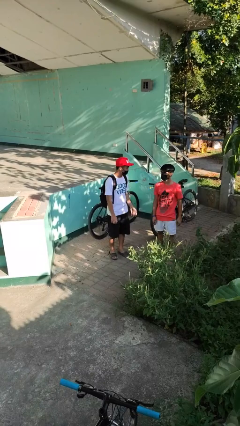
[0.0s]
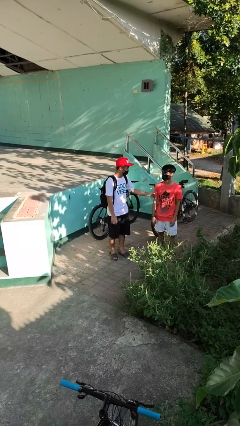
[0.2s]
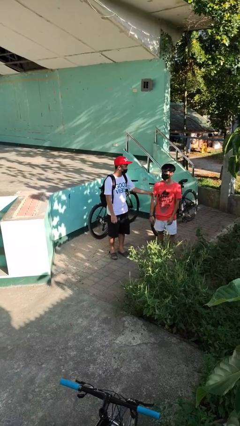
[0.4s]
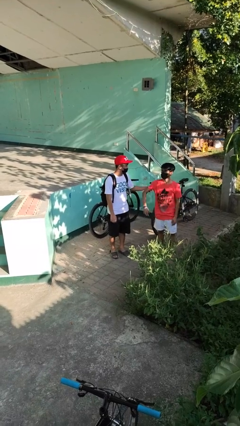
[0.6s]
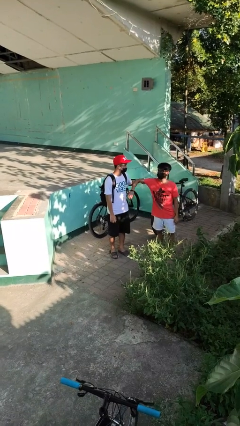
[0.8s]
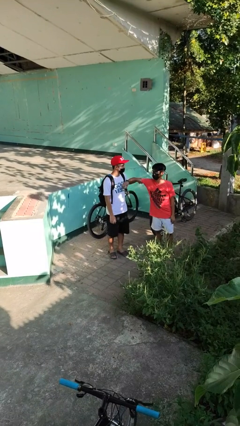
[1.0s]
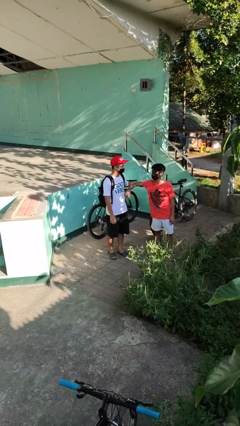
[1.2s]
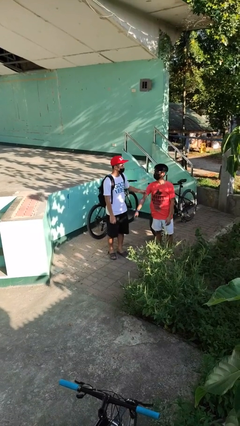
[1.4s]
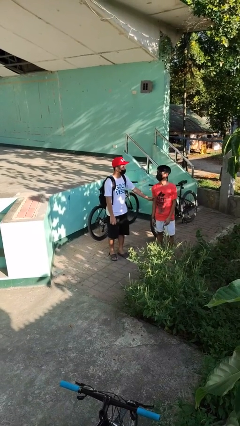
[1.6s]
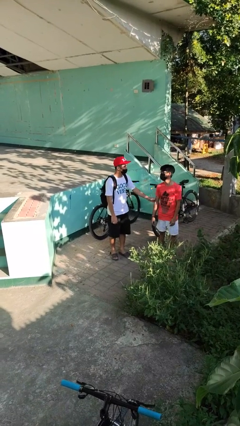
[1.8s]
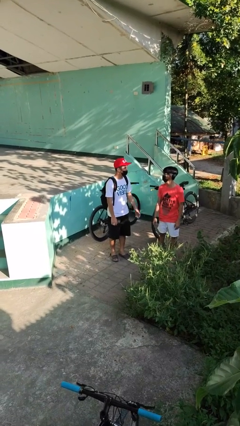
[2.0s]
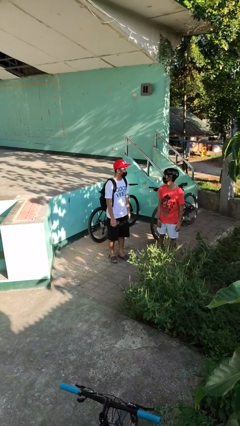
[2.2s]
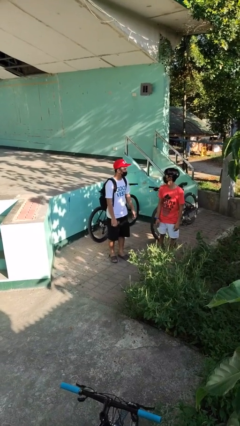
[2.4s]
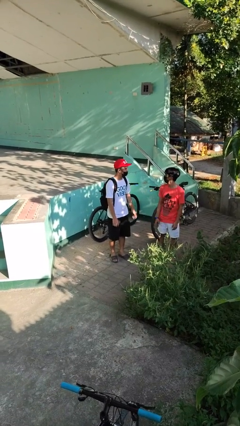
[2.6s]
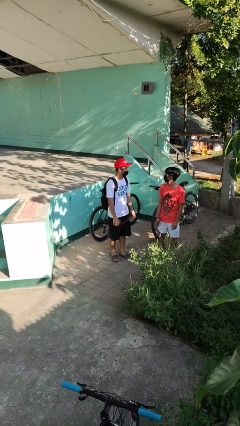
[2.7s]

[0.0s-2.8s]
person grabs person by bicep

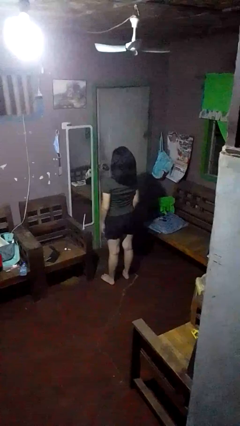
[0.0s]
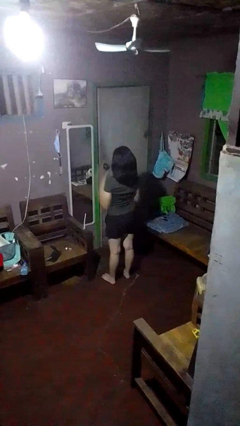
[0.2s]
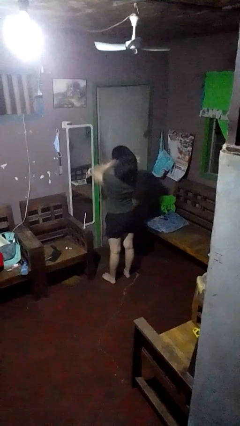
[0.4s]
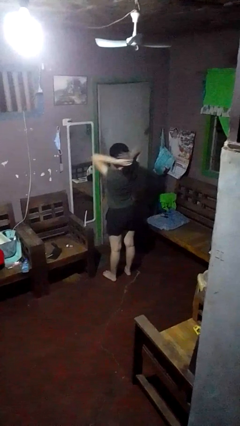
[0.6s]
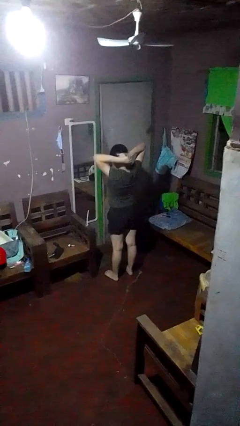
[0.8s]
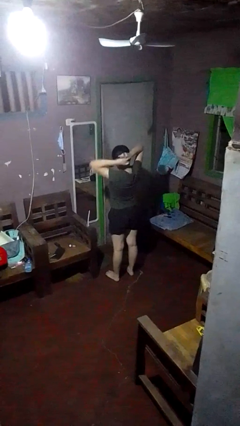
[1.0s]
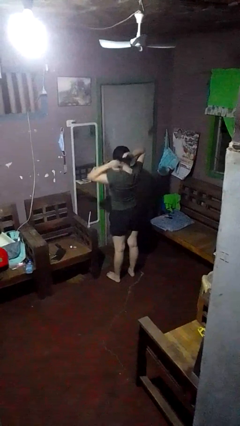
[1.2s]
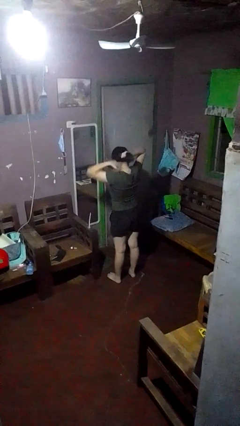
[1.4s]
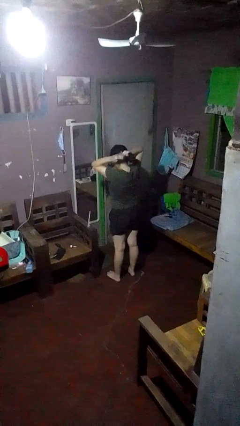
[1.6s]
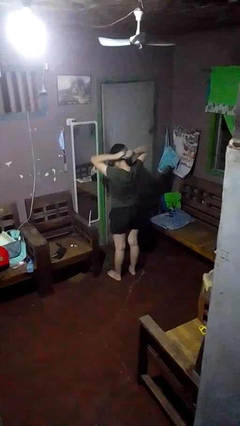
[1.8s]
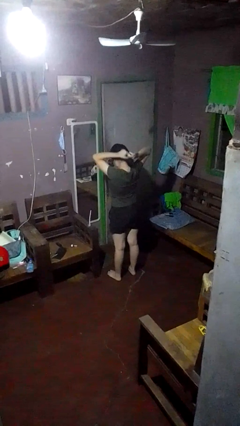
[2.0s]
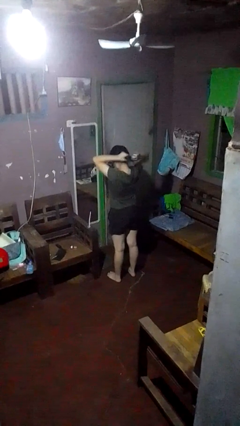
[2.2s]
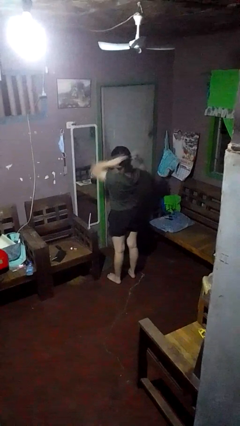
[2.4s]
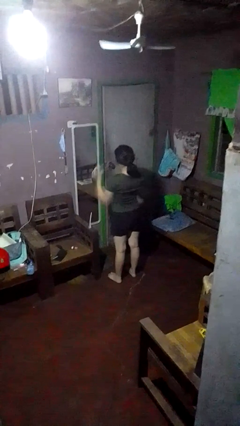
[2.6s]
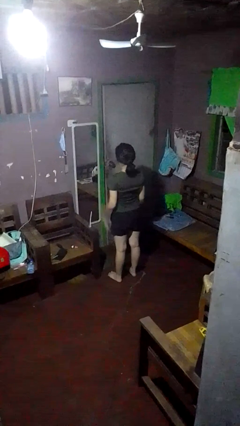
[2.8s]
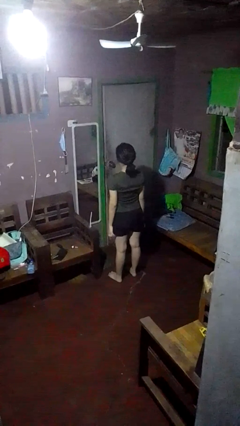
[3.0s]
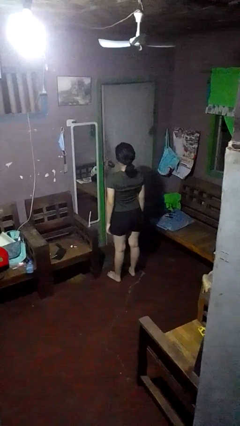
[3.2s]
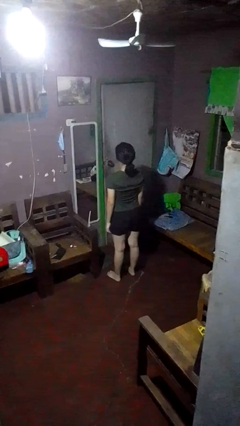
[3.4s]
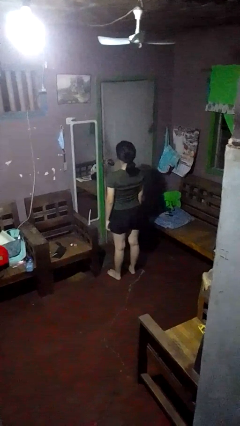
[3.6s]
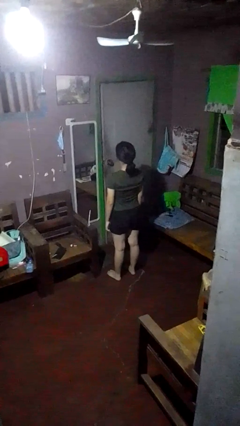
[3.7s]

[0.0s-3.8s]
person puts hair in ponytail

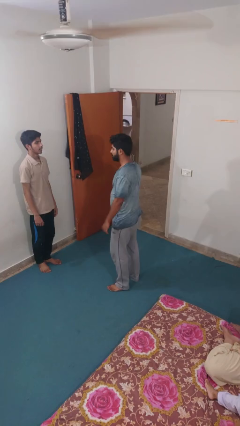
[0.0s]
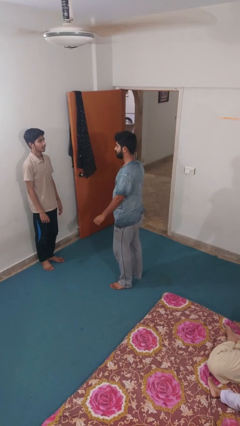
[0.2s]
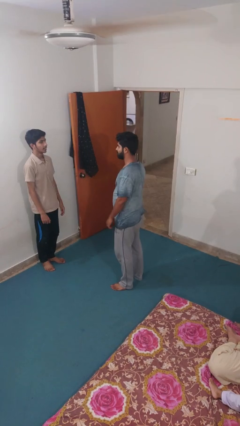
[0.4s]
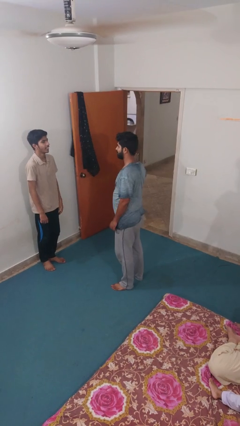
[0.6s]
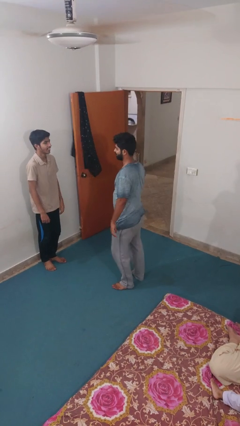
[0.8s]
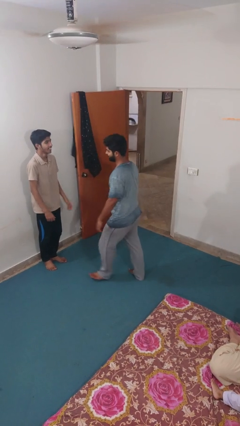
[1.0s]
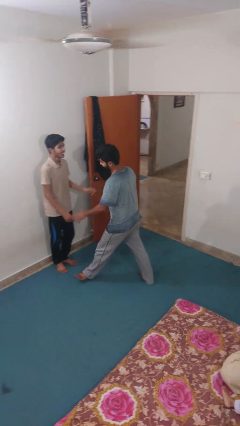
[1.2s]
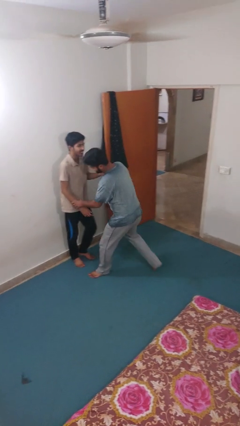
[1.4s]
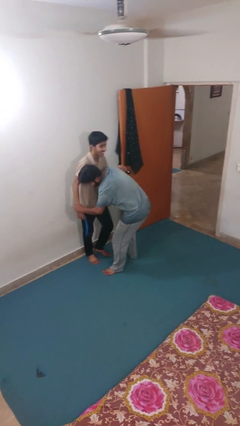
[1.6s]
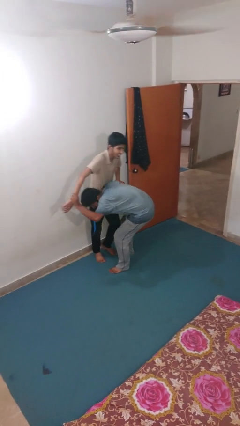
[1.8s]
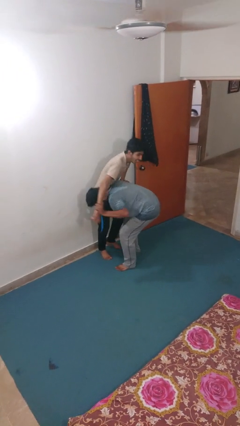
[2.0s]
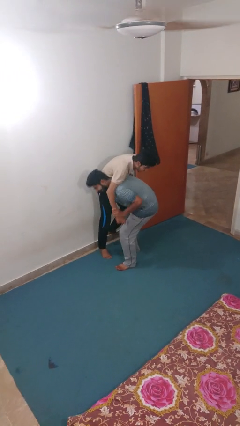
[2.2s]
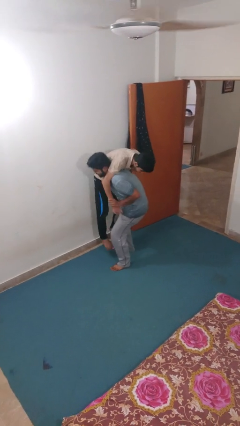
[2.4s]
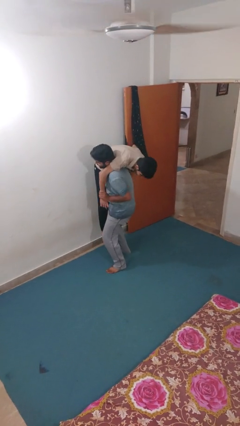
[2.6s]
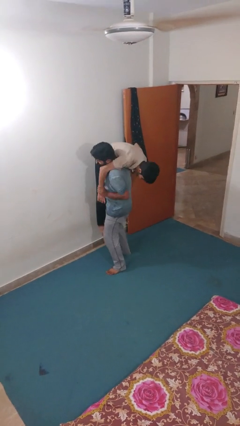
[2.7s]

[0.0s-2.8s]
person carries person over shoulder

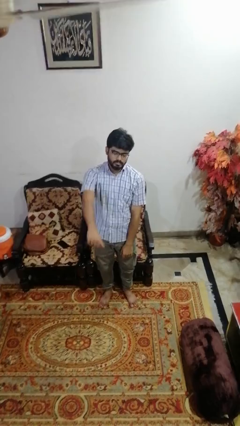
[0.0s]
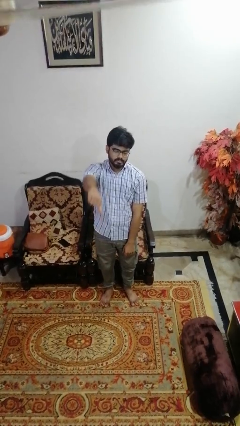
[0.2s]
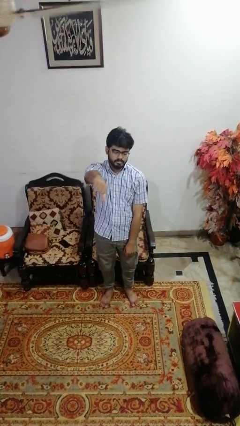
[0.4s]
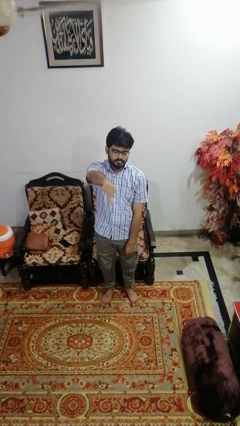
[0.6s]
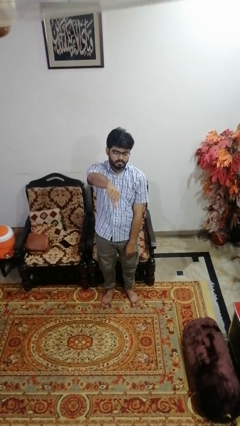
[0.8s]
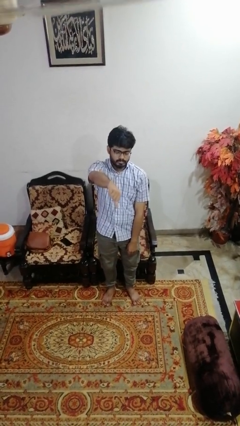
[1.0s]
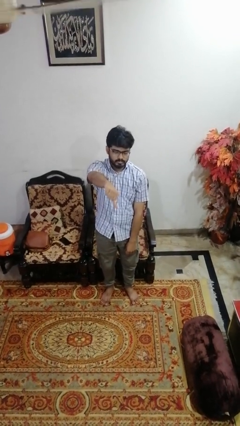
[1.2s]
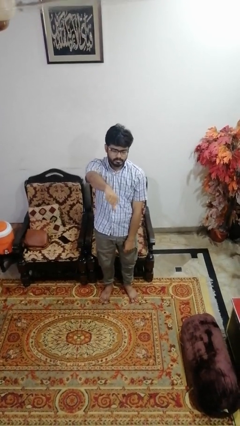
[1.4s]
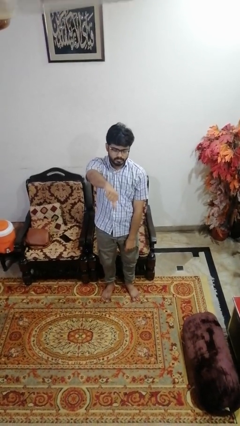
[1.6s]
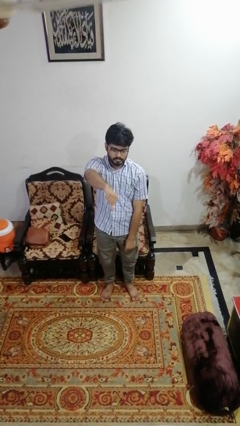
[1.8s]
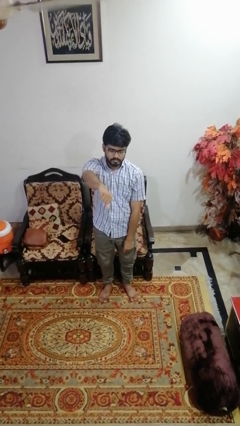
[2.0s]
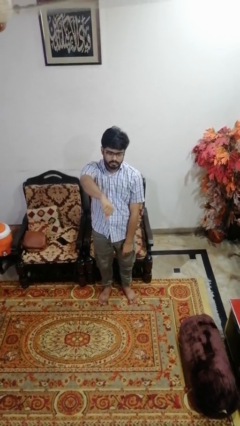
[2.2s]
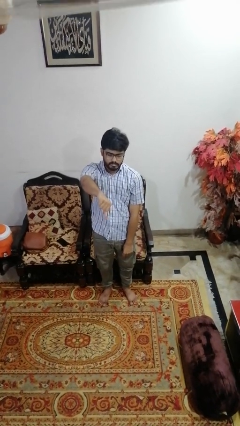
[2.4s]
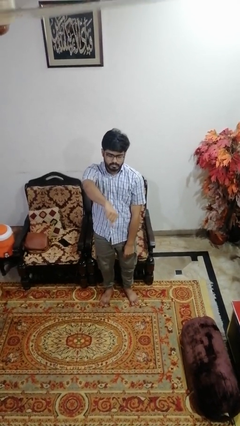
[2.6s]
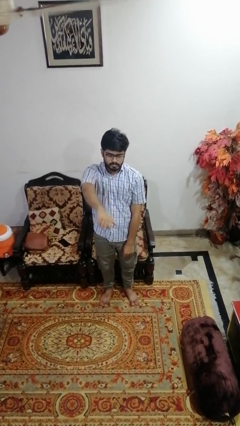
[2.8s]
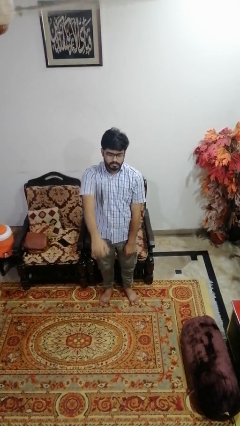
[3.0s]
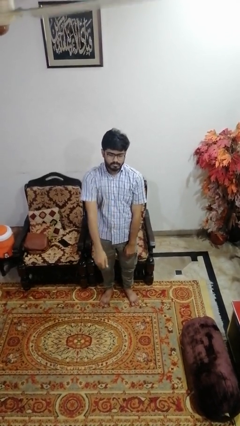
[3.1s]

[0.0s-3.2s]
person gestures thumbs down

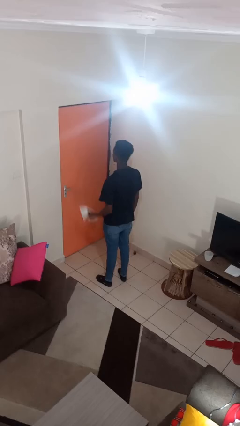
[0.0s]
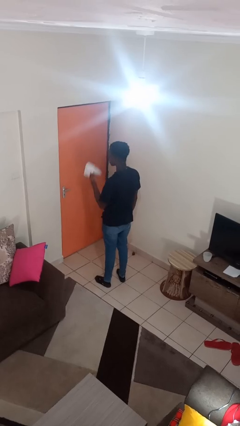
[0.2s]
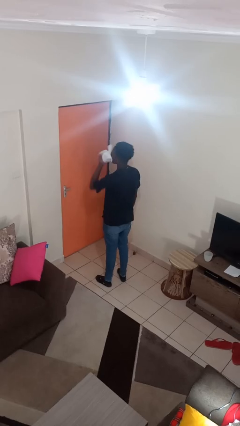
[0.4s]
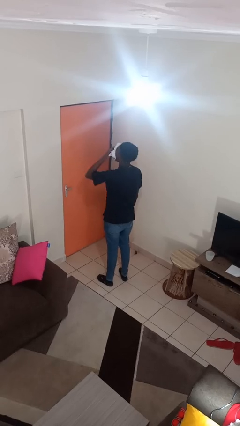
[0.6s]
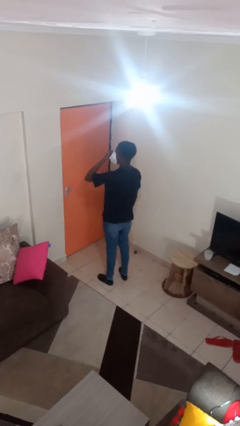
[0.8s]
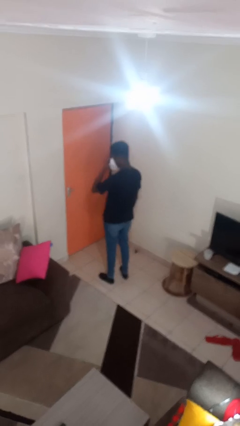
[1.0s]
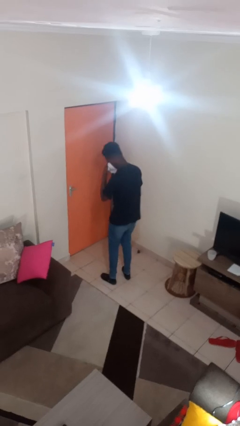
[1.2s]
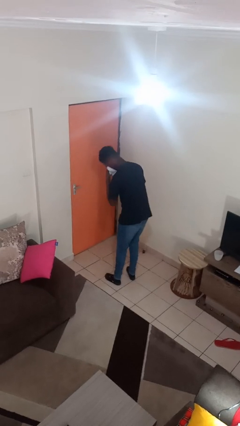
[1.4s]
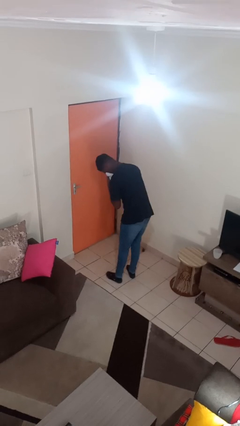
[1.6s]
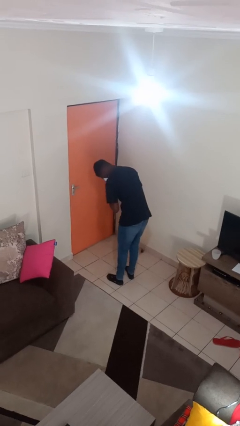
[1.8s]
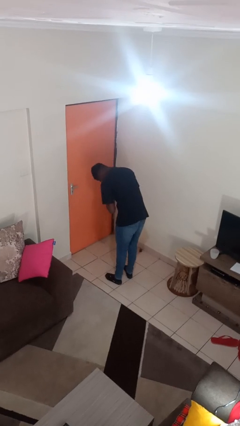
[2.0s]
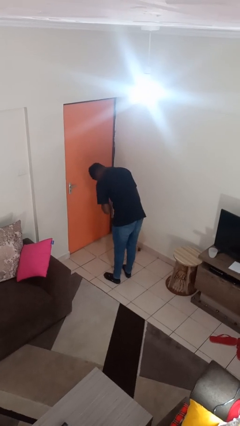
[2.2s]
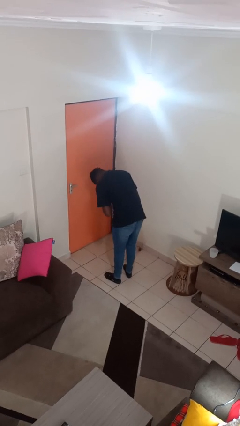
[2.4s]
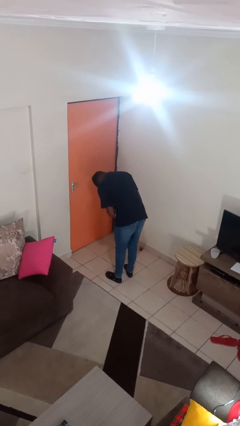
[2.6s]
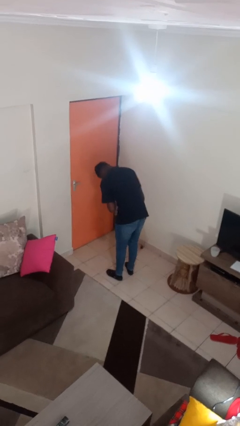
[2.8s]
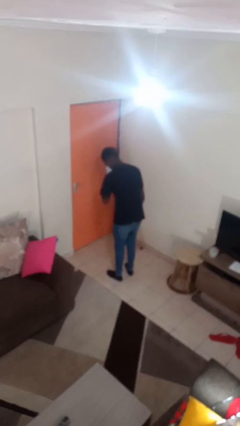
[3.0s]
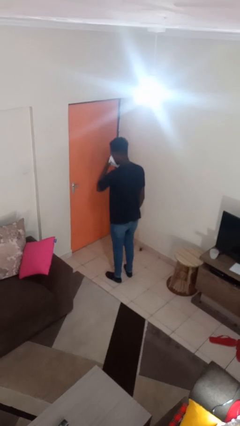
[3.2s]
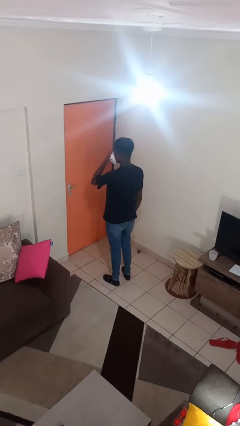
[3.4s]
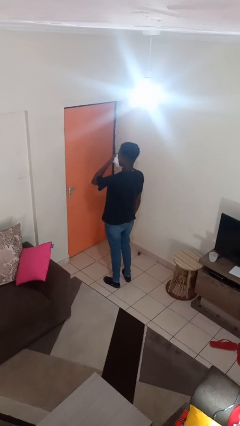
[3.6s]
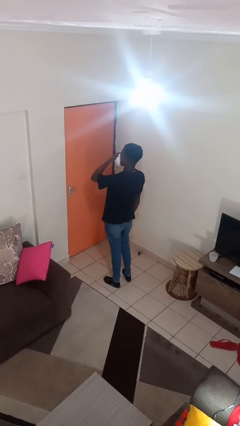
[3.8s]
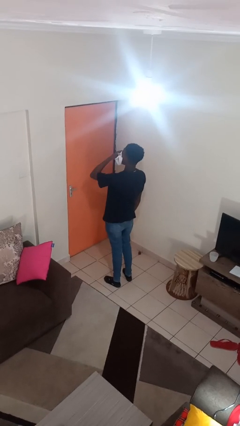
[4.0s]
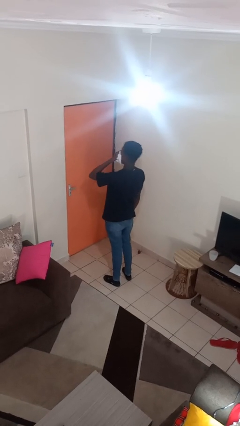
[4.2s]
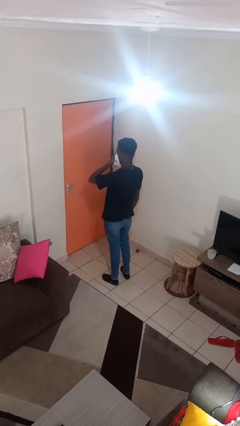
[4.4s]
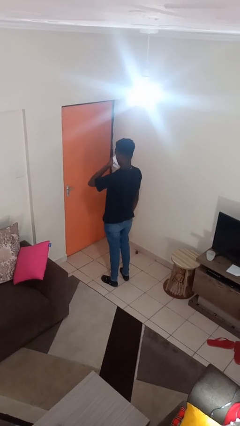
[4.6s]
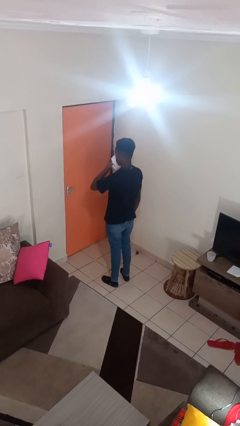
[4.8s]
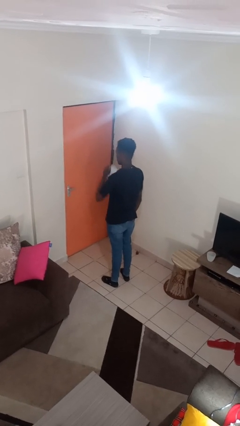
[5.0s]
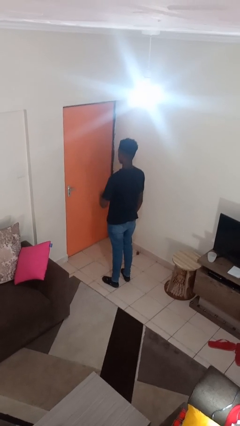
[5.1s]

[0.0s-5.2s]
person blows nose
